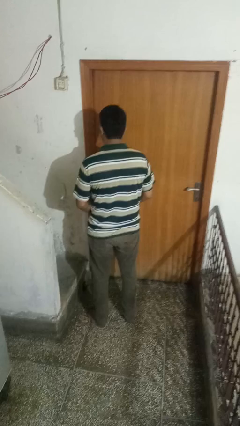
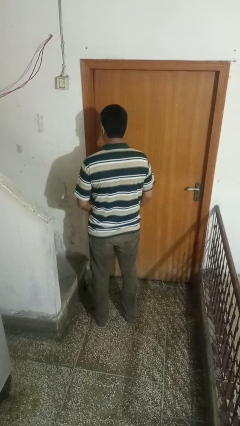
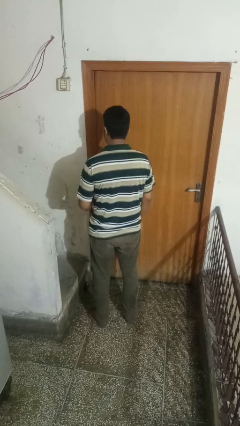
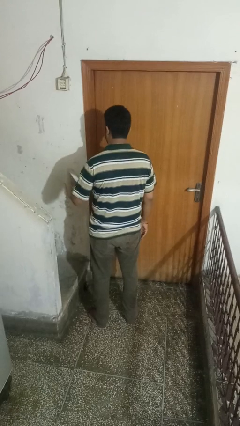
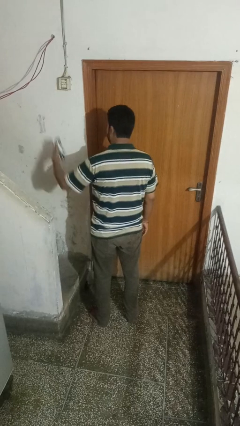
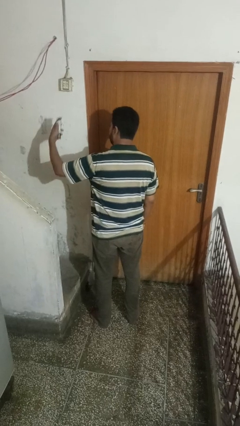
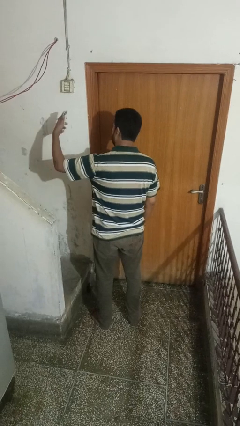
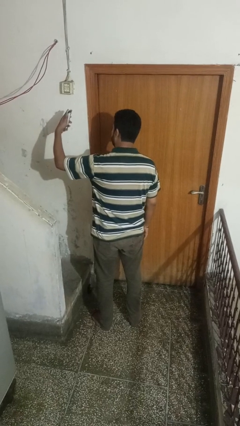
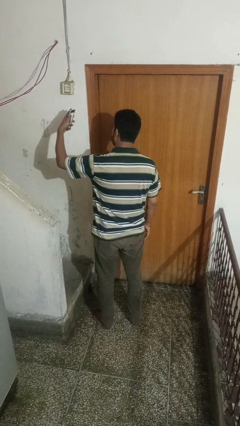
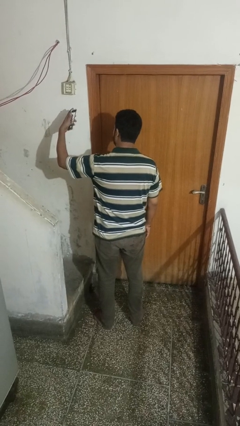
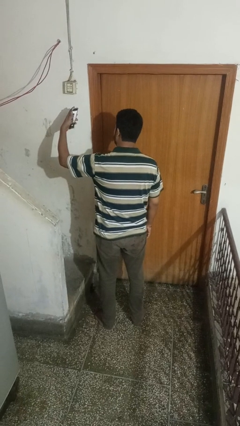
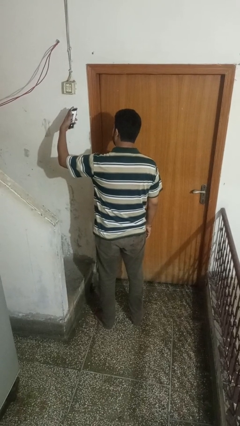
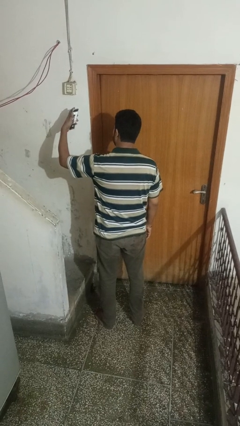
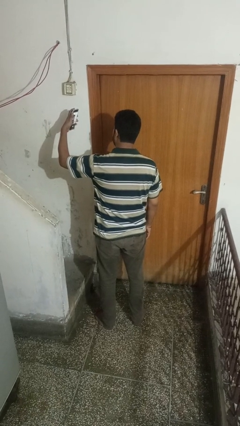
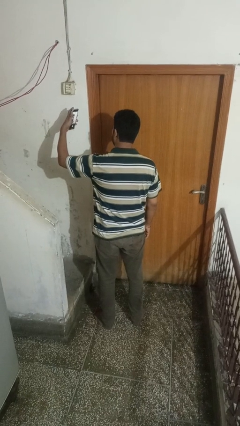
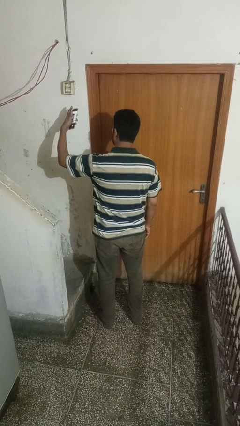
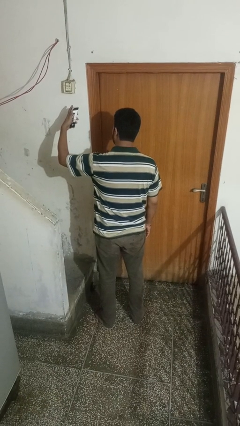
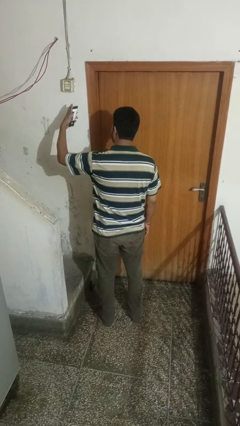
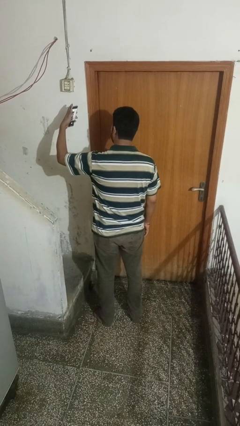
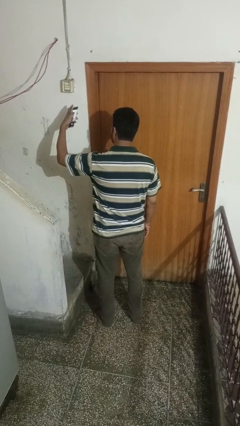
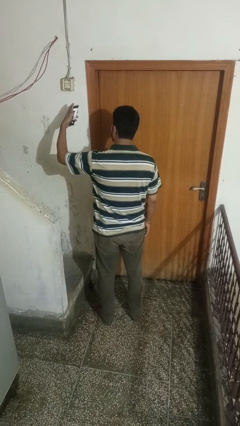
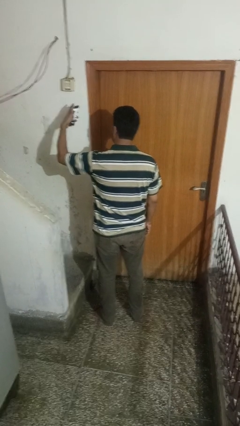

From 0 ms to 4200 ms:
person takes selfie

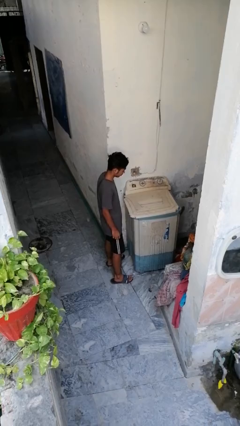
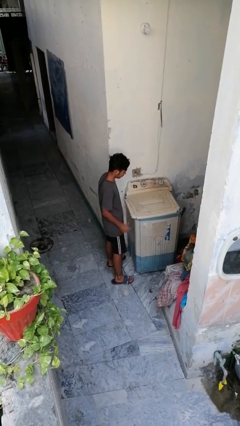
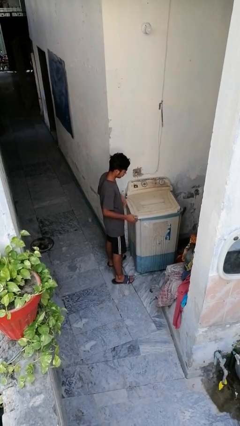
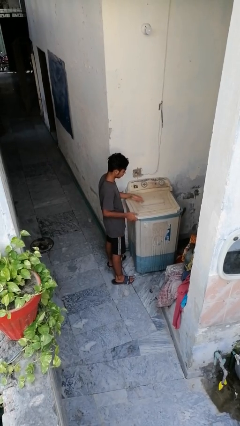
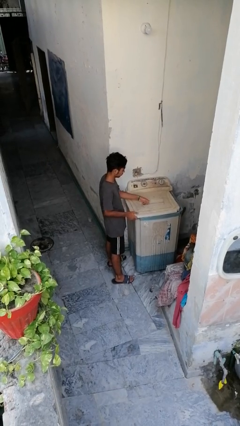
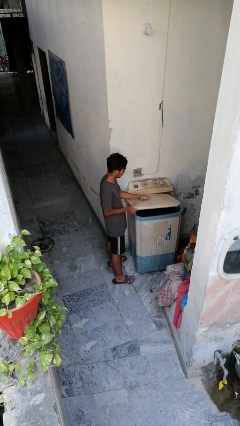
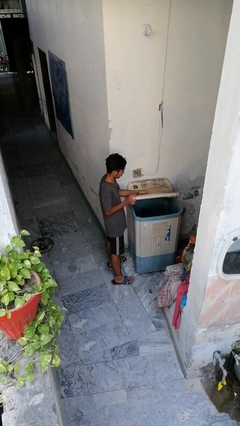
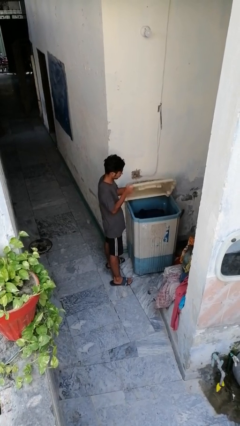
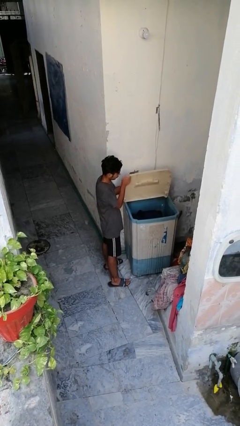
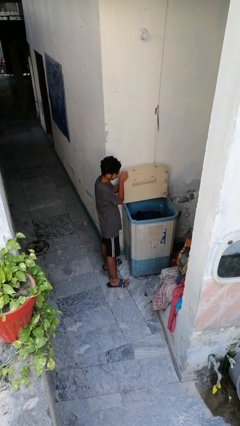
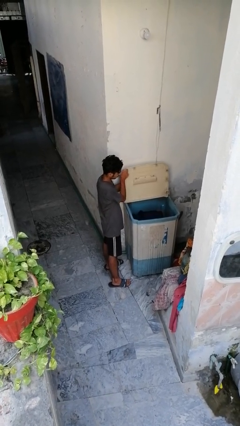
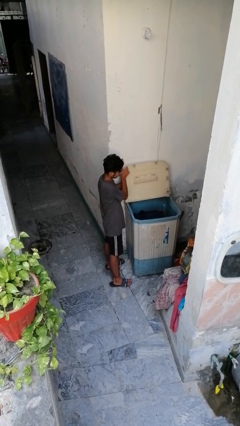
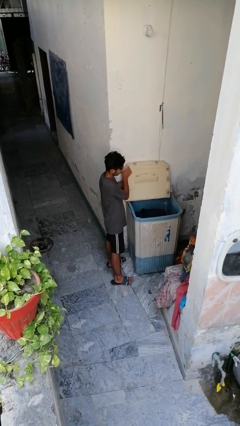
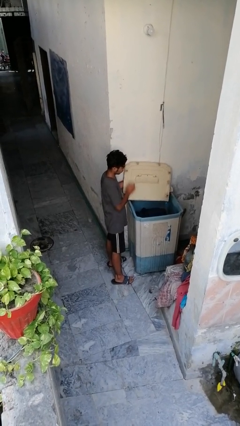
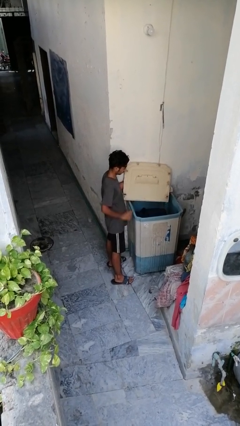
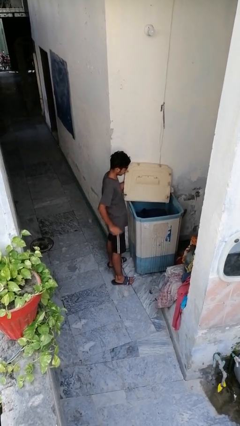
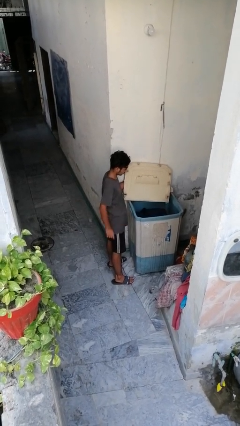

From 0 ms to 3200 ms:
person opens clothes washer

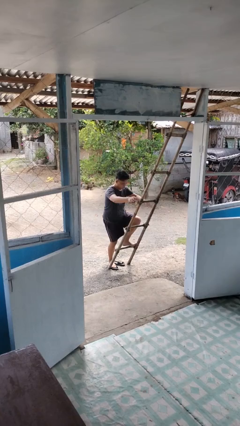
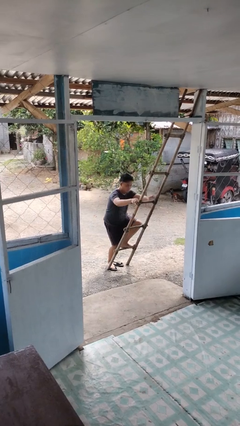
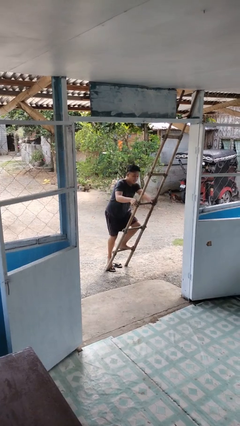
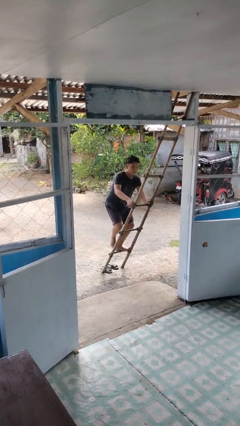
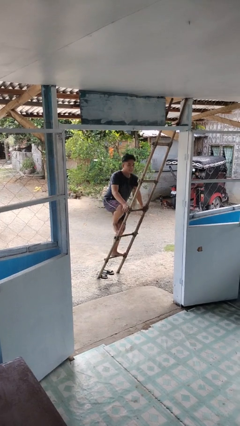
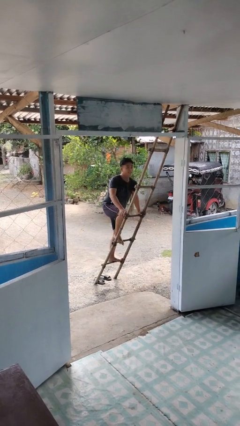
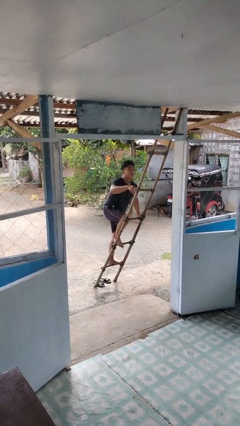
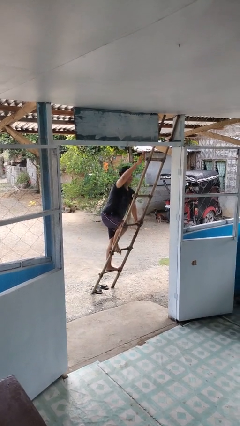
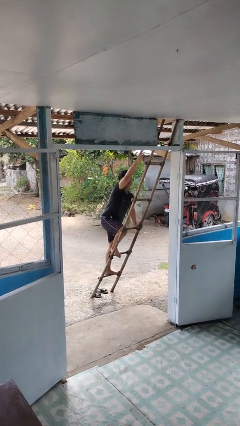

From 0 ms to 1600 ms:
person climbs up ladder

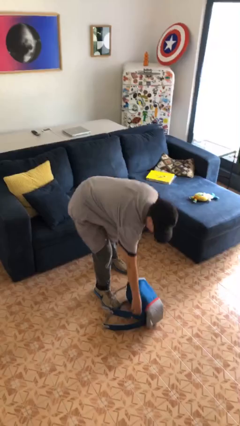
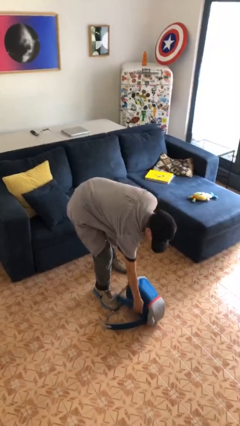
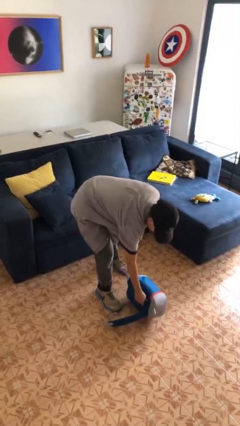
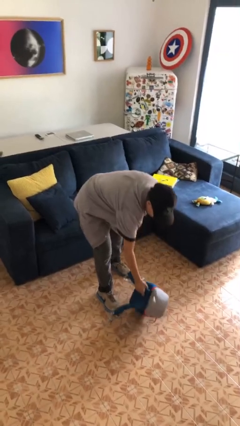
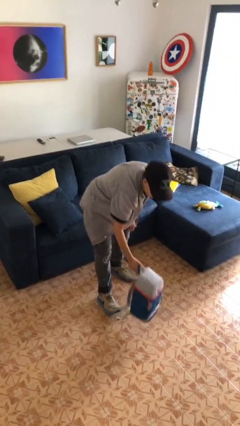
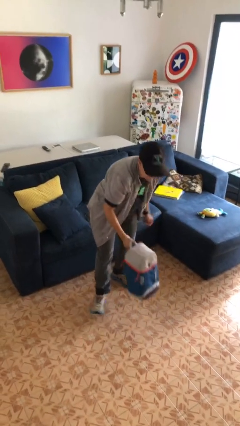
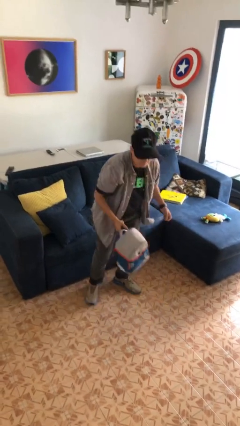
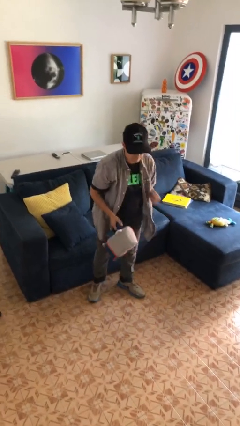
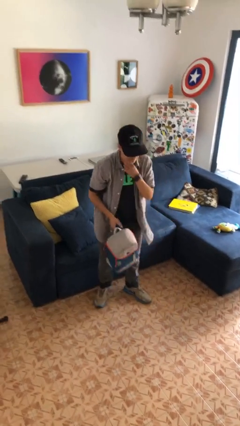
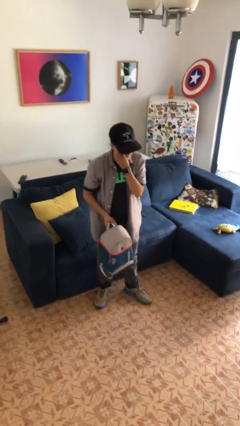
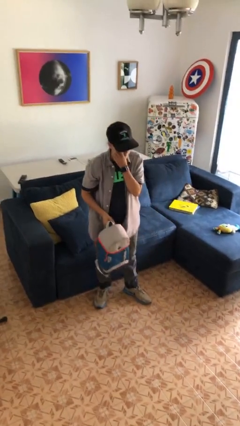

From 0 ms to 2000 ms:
person picks up object from floor

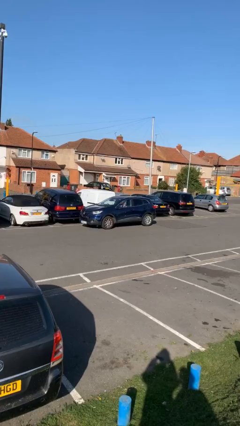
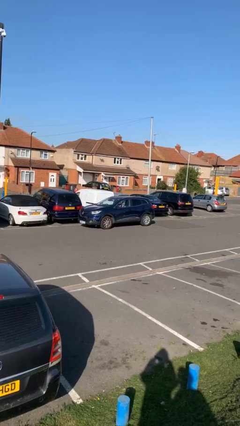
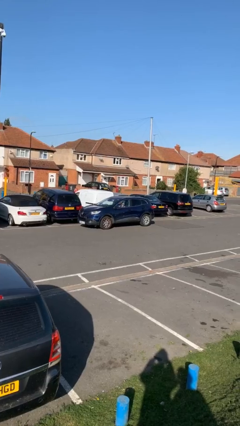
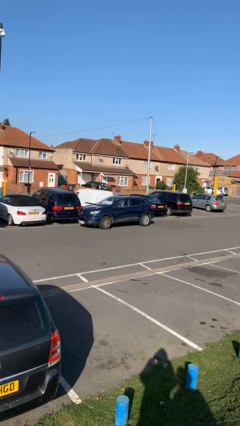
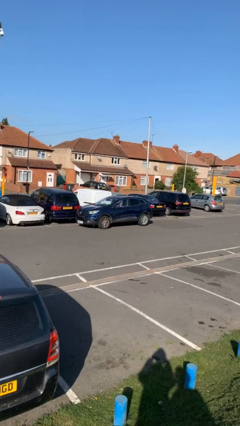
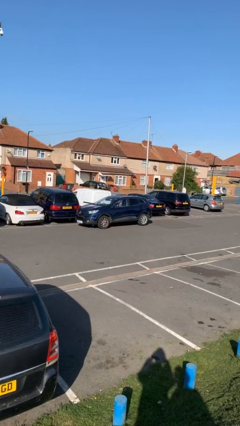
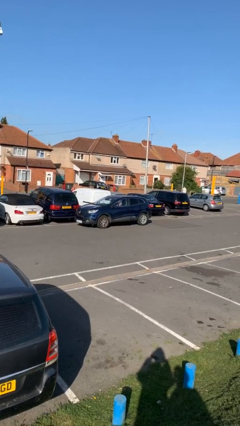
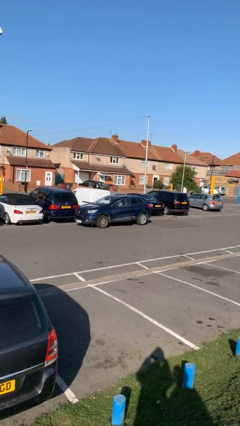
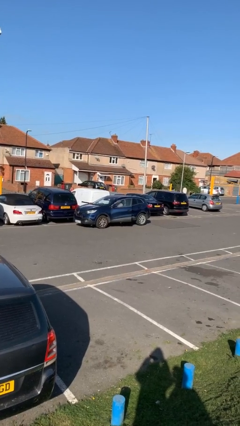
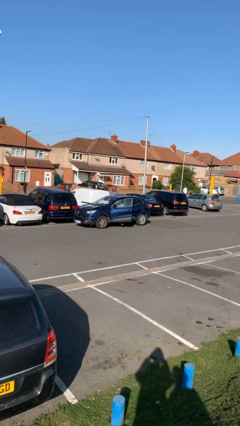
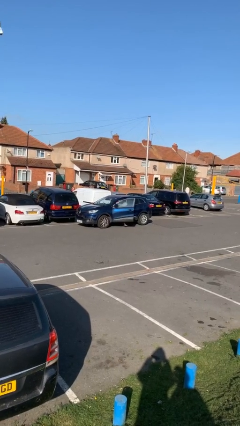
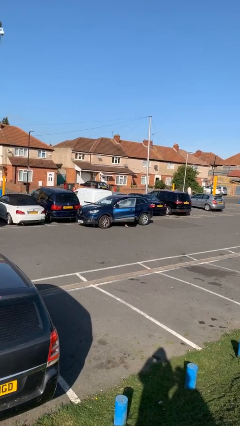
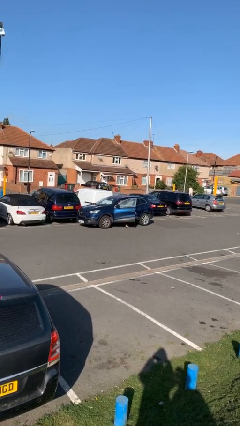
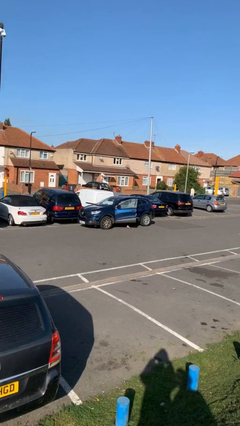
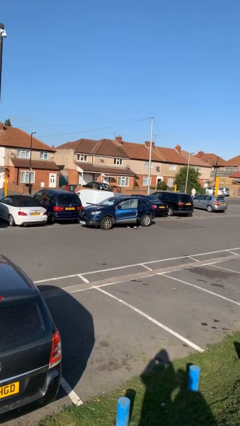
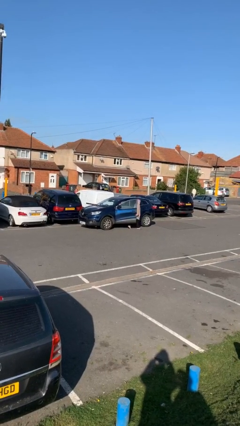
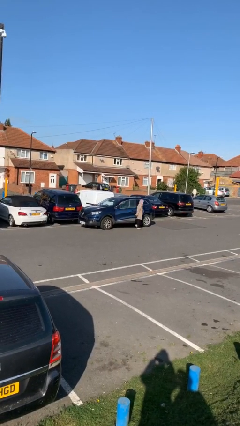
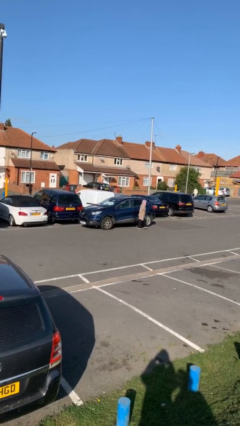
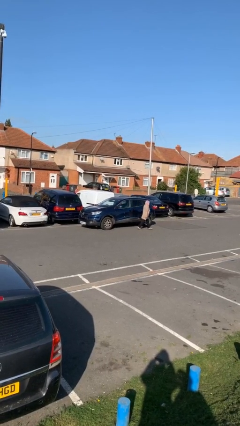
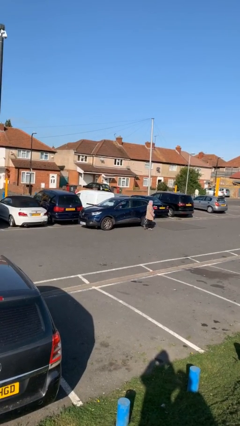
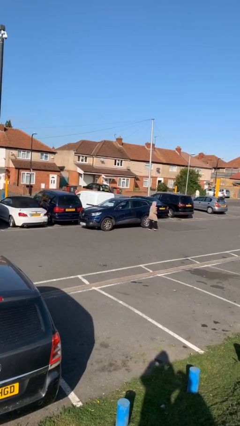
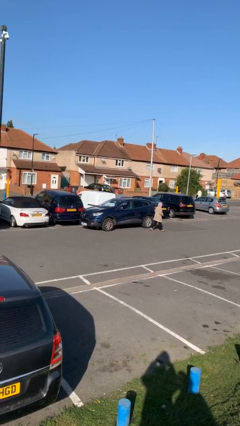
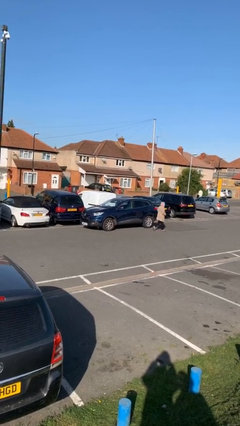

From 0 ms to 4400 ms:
car drops off person

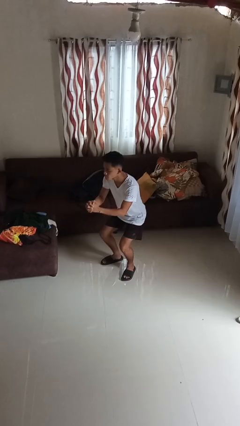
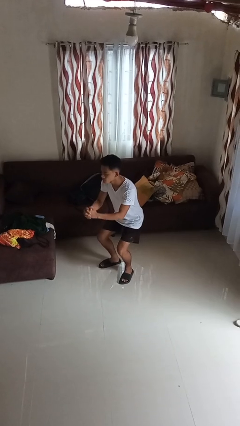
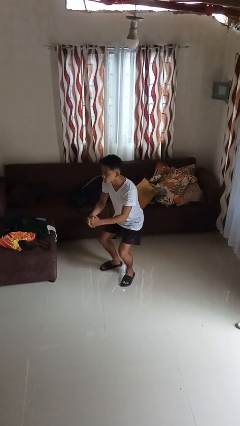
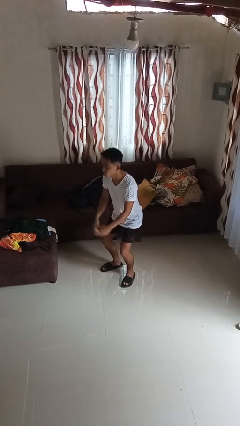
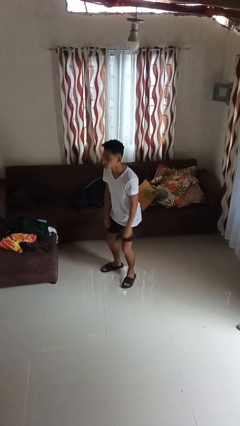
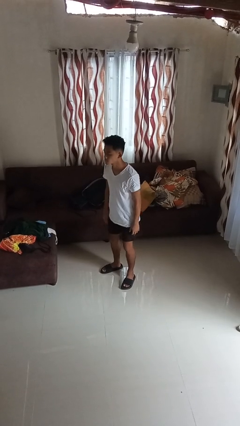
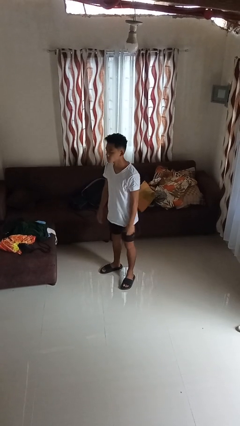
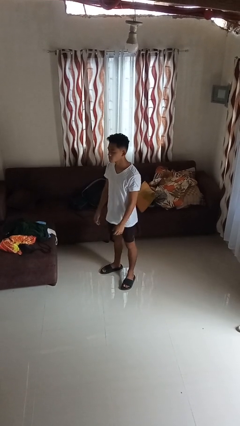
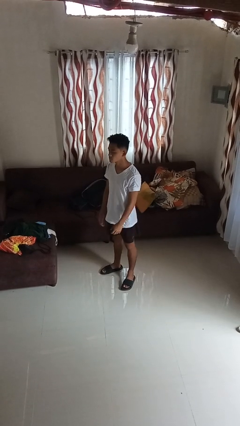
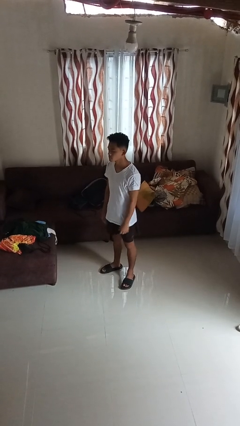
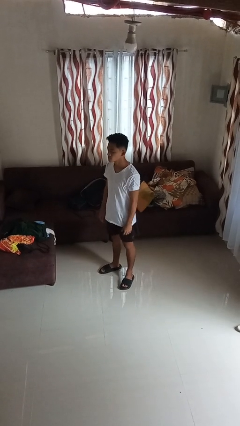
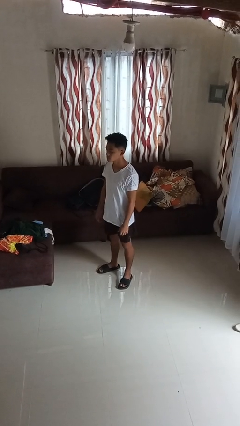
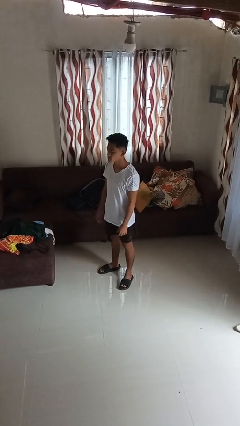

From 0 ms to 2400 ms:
person stands up
